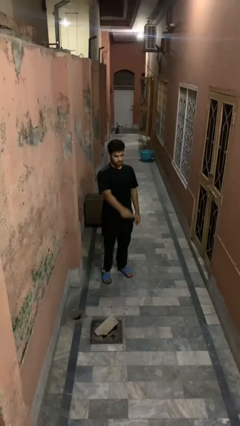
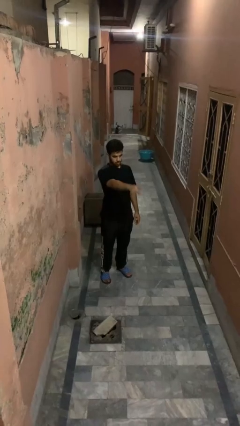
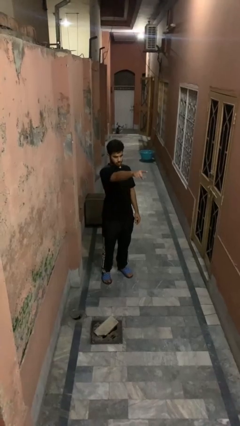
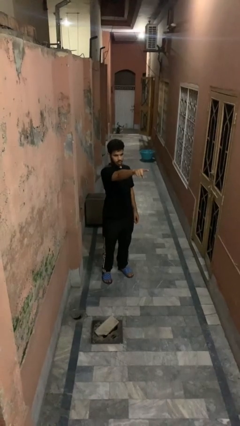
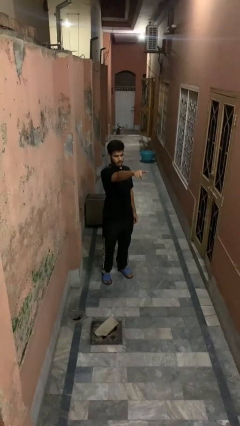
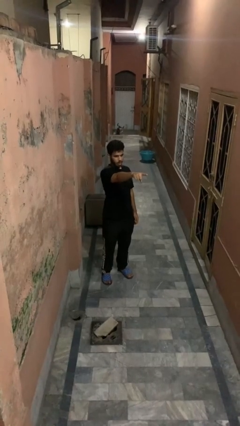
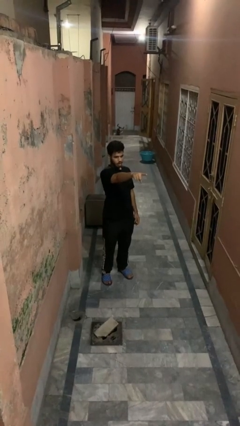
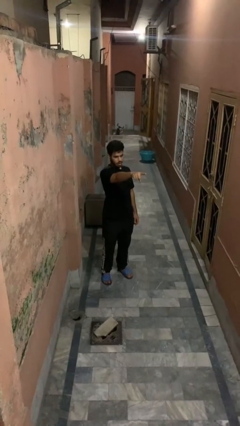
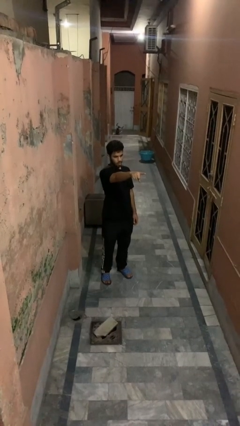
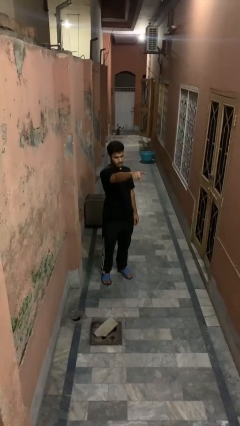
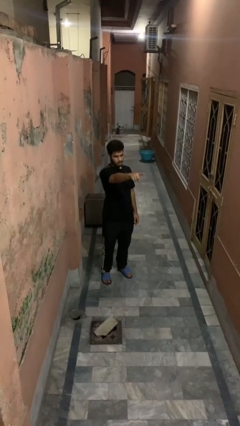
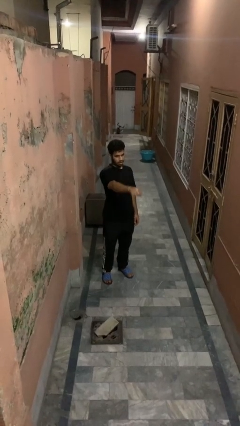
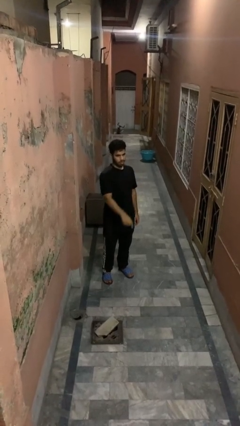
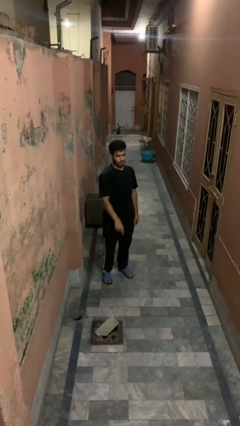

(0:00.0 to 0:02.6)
person points at person

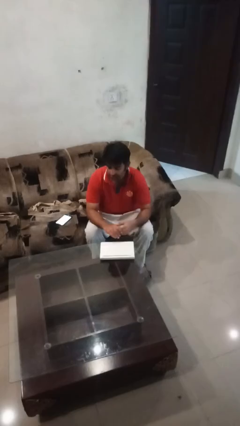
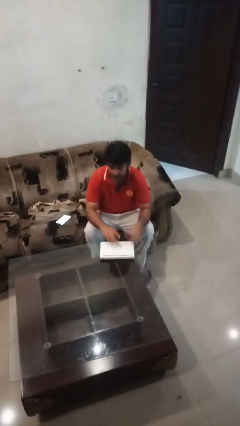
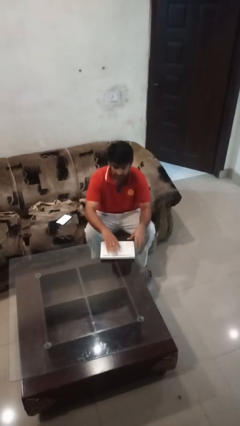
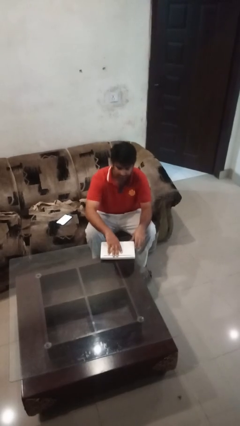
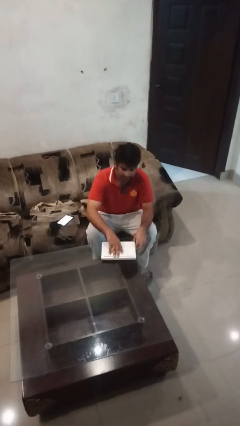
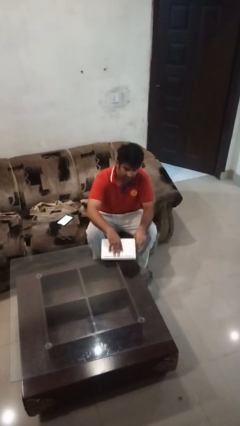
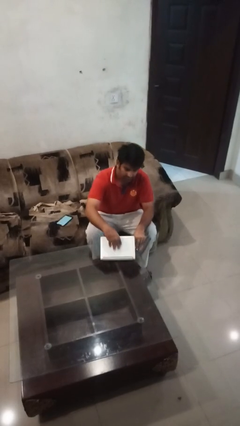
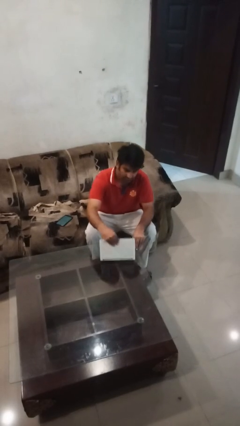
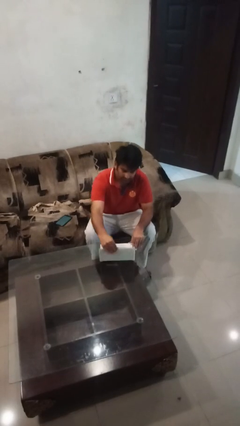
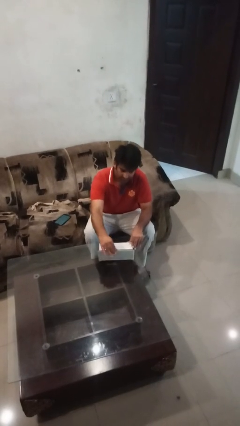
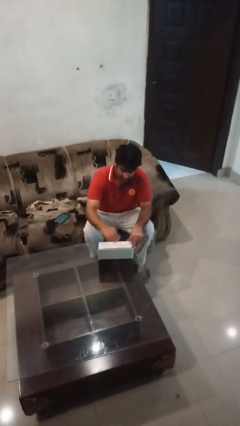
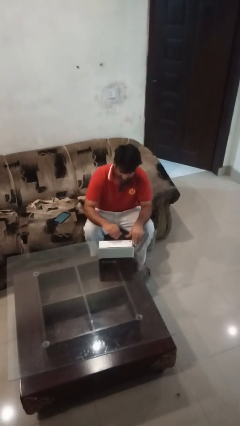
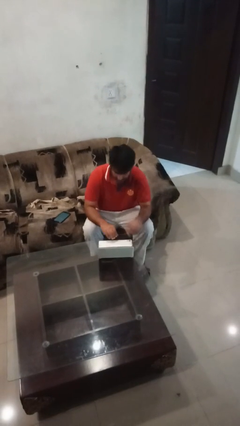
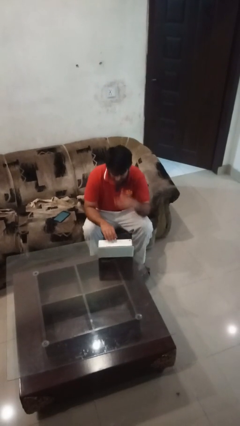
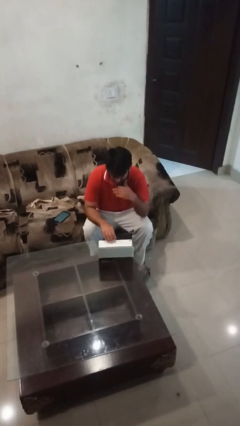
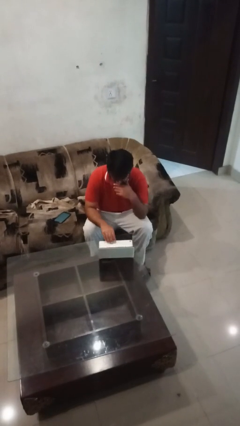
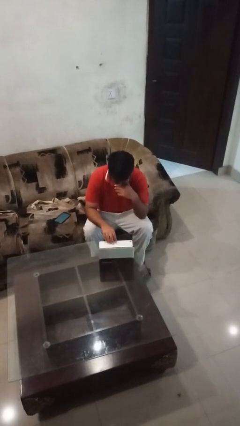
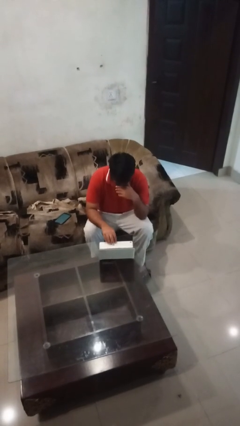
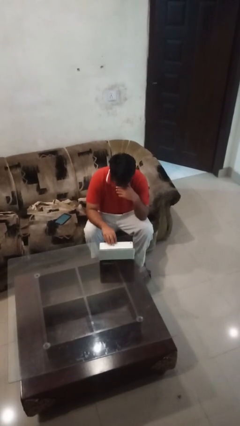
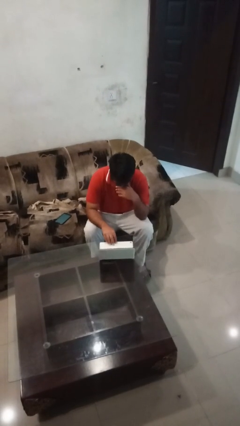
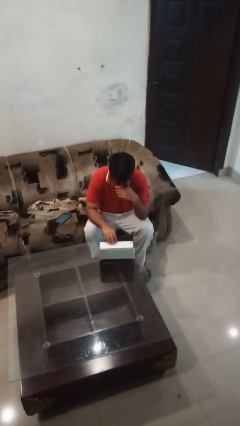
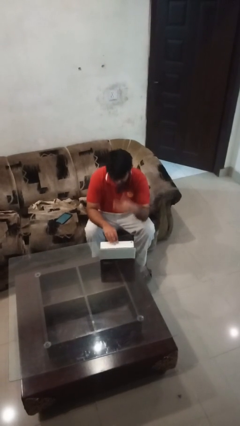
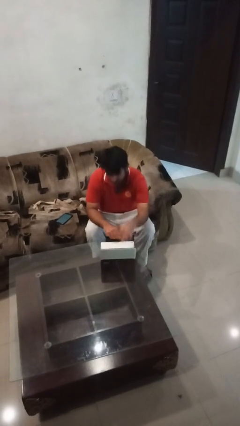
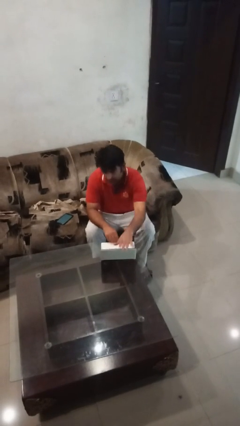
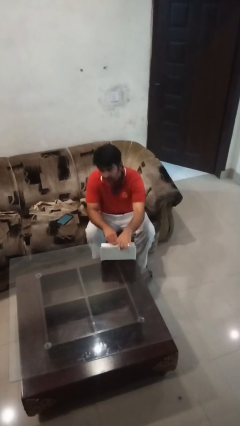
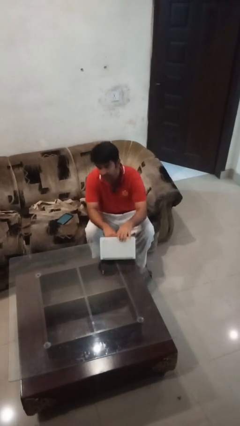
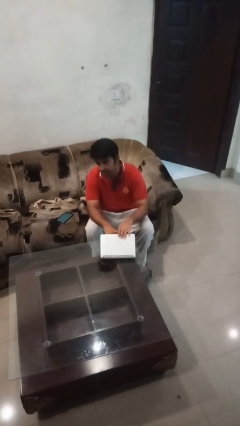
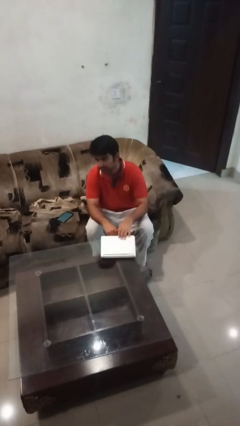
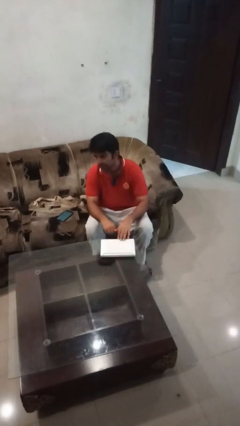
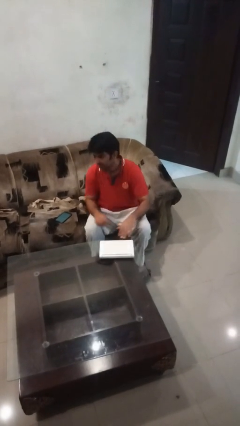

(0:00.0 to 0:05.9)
person interacts with laptop

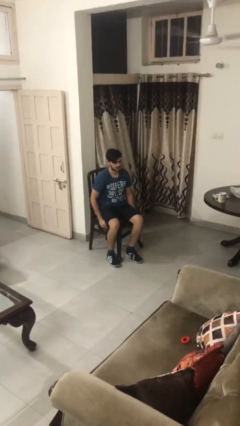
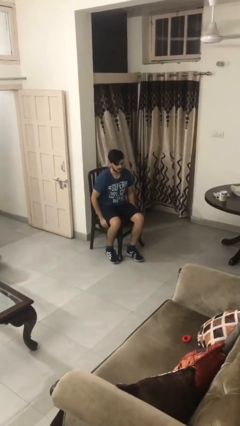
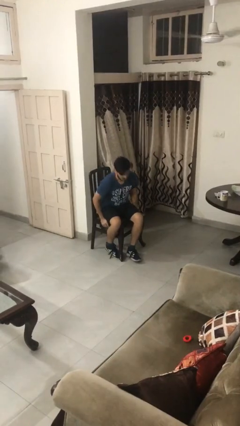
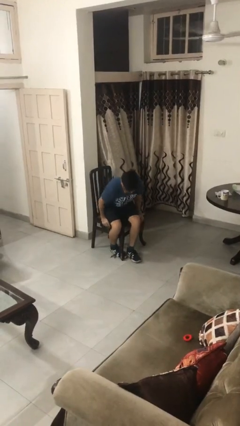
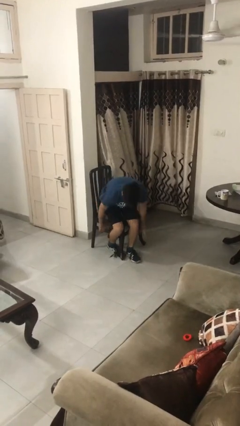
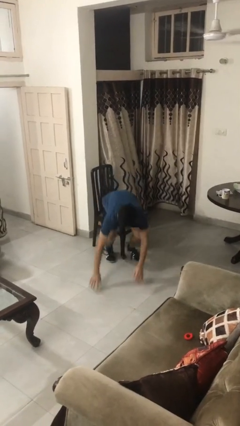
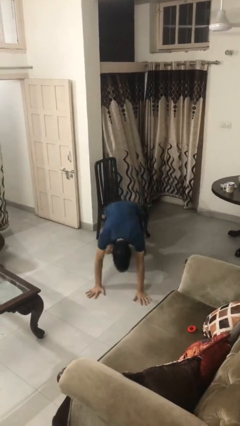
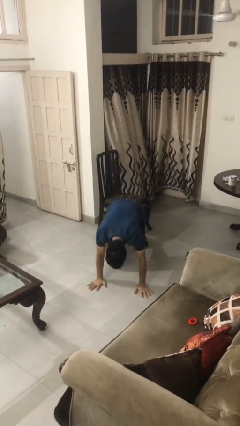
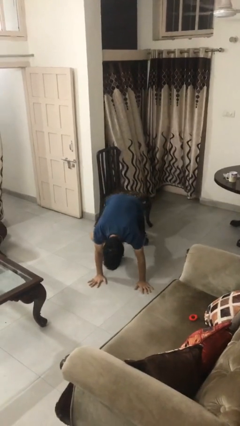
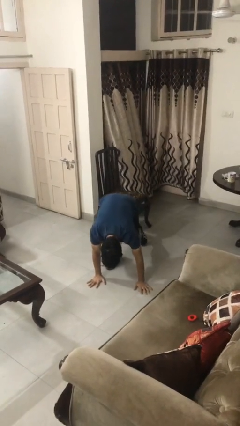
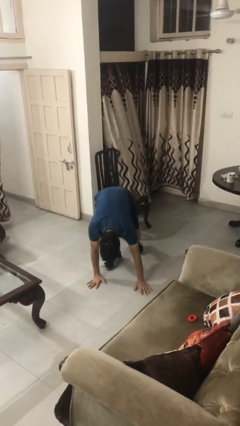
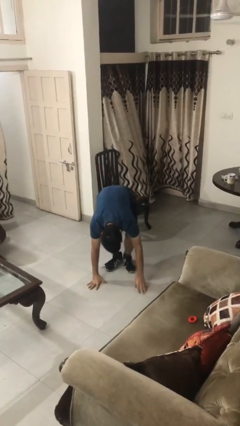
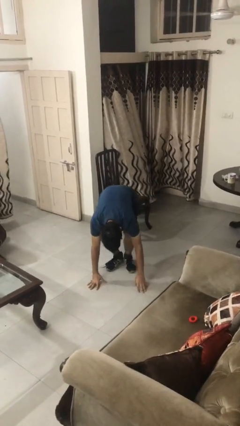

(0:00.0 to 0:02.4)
person falls from chair

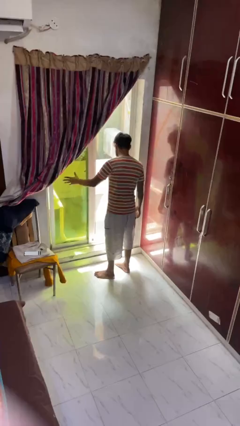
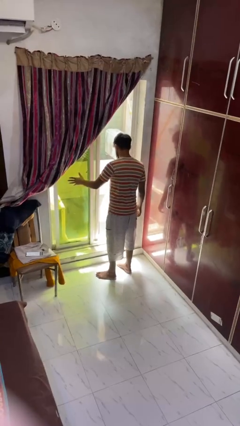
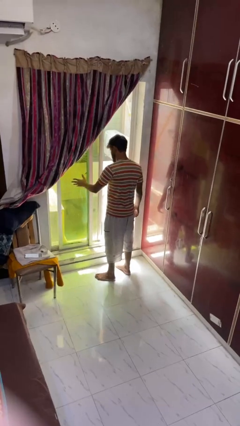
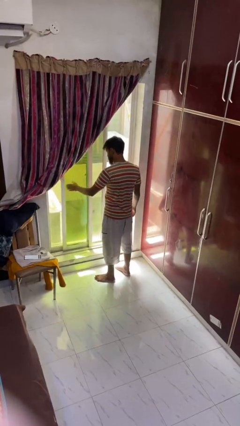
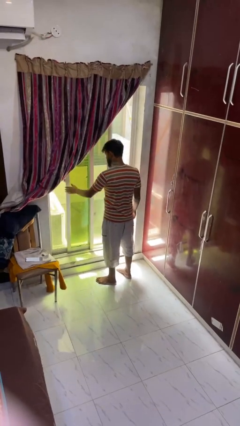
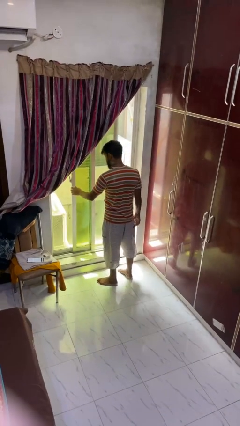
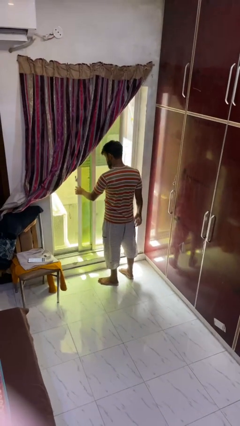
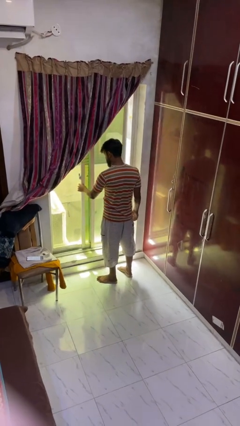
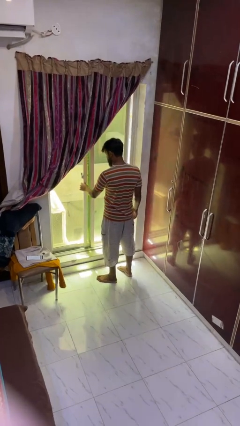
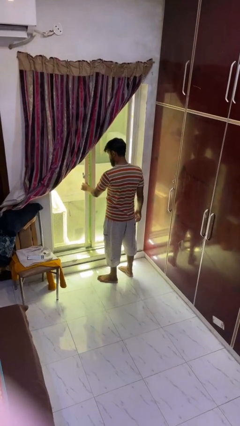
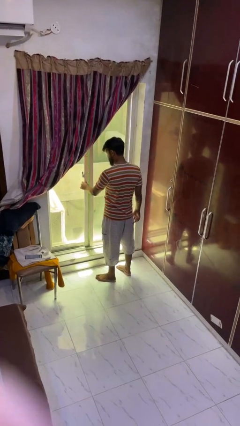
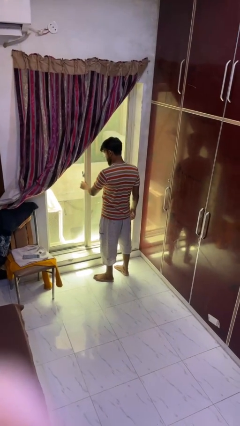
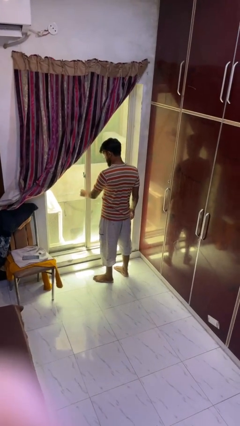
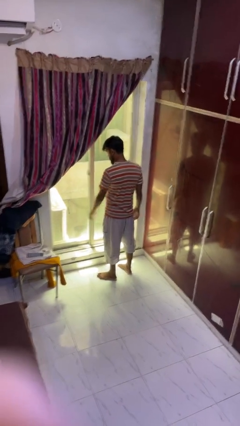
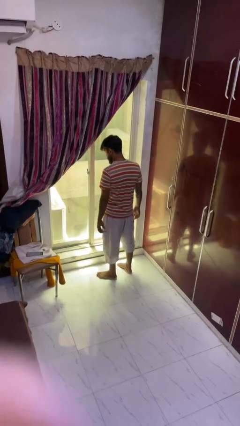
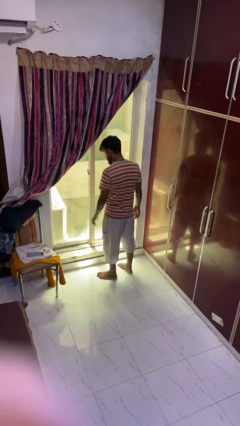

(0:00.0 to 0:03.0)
person closes home window

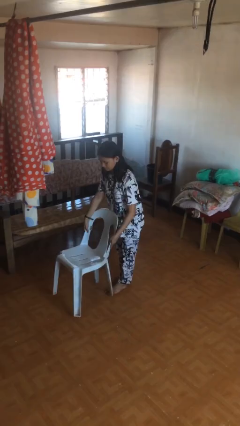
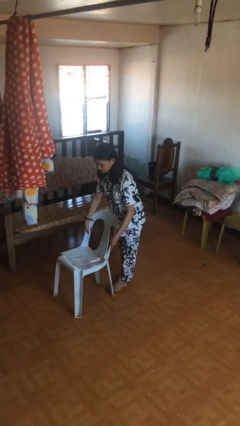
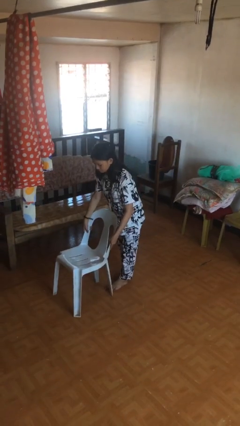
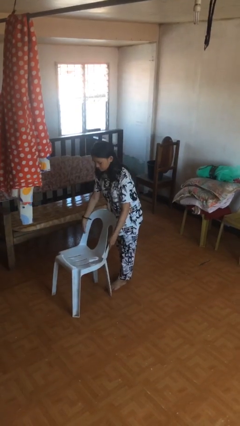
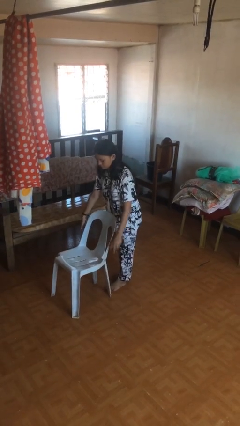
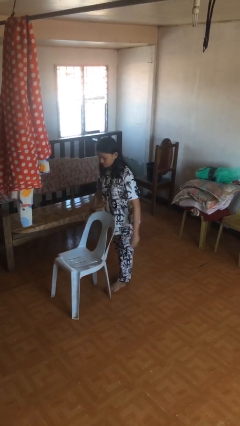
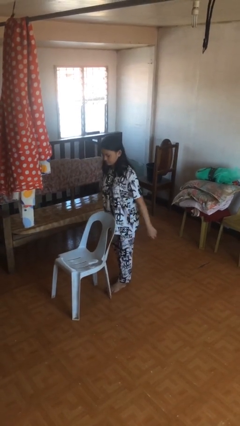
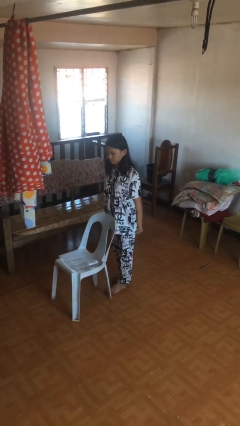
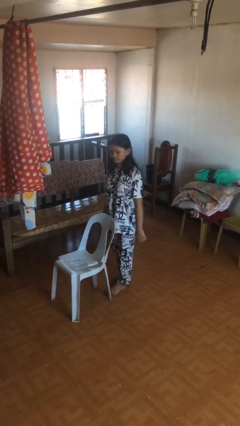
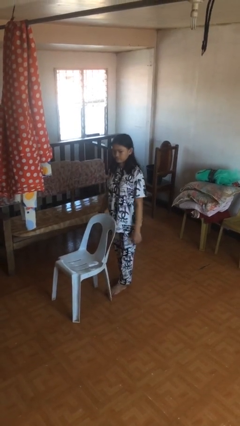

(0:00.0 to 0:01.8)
person puts down object on floor

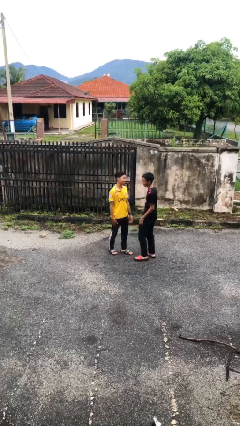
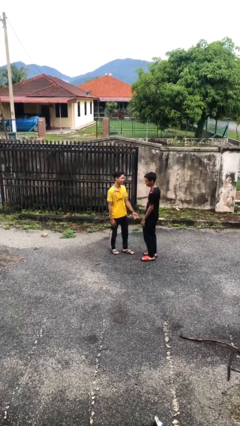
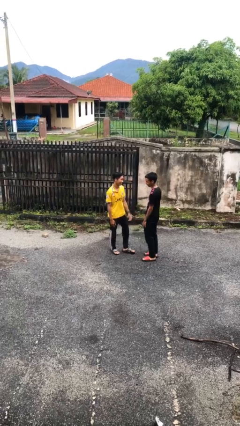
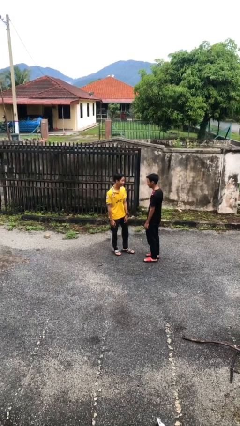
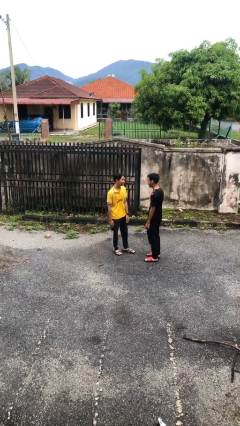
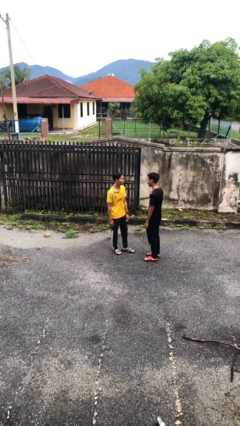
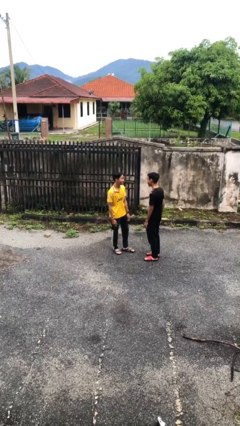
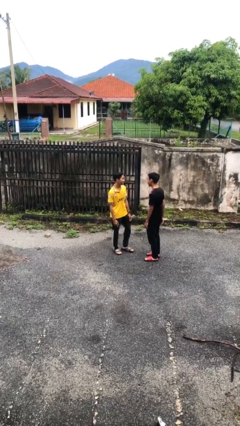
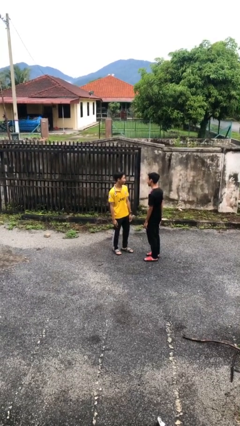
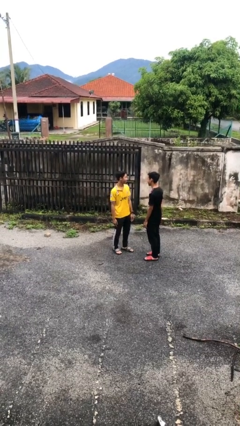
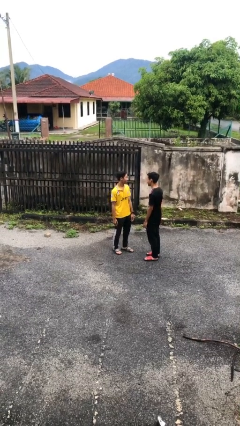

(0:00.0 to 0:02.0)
person talks to person
